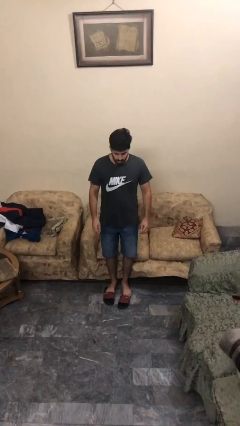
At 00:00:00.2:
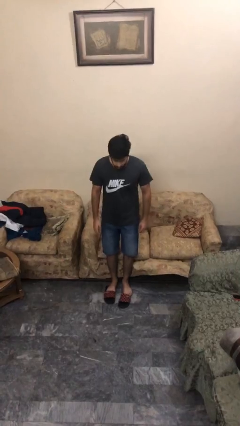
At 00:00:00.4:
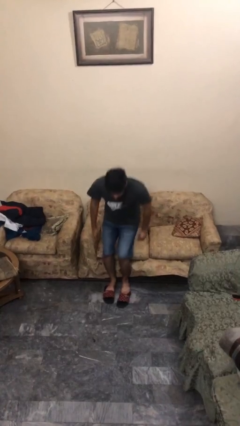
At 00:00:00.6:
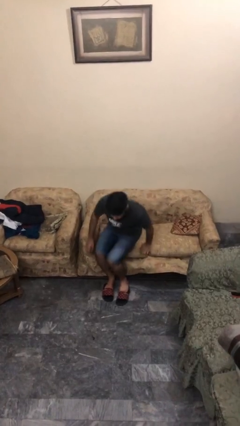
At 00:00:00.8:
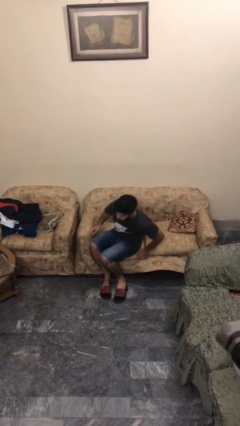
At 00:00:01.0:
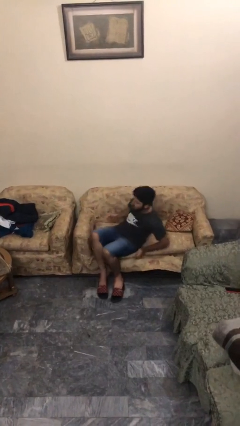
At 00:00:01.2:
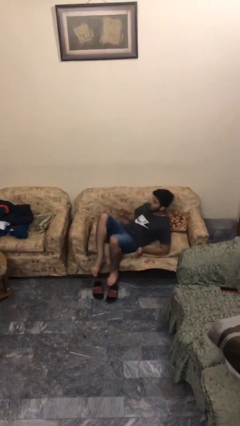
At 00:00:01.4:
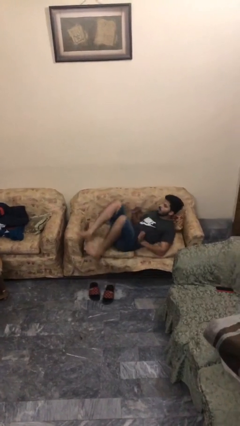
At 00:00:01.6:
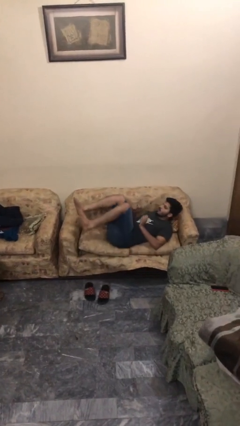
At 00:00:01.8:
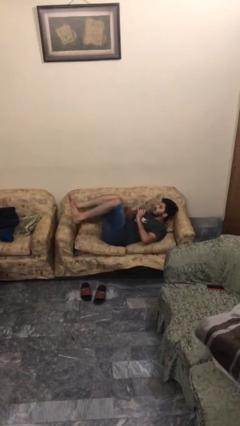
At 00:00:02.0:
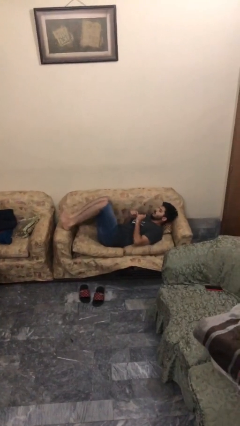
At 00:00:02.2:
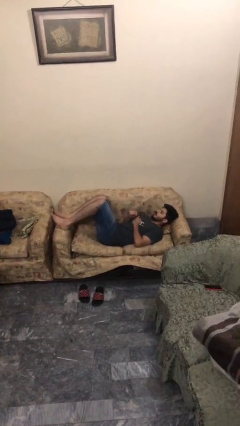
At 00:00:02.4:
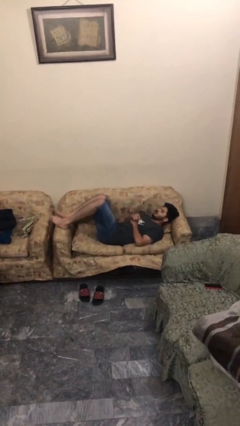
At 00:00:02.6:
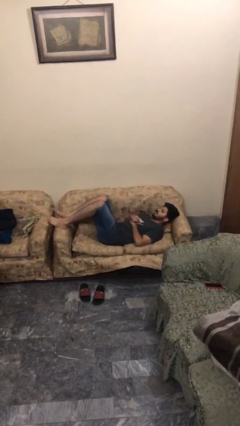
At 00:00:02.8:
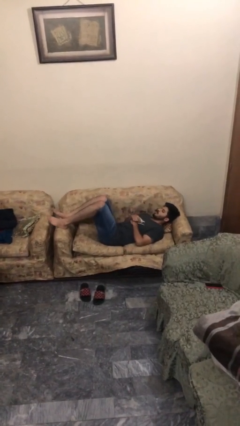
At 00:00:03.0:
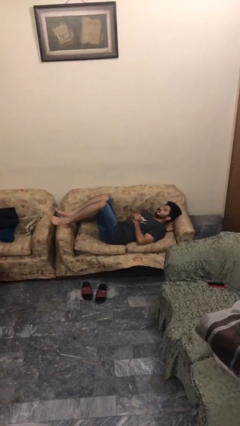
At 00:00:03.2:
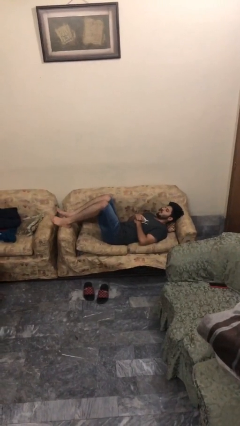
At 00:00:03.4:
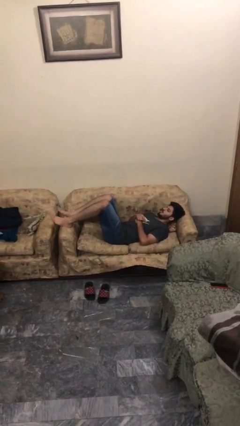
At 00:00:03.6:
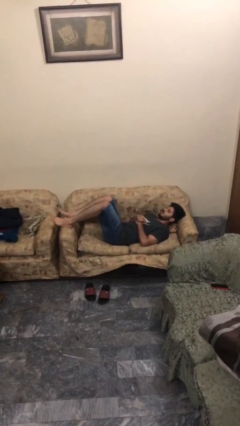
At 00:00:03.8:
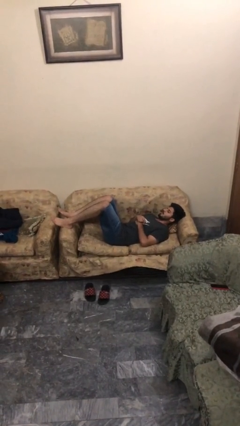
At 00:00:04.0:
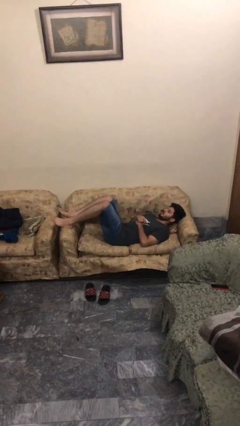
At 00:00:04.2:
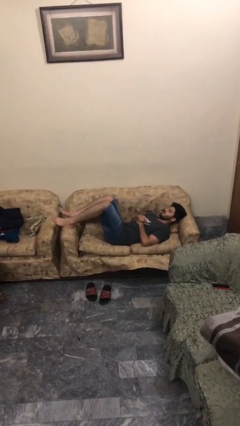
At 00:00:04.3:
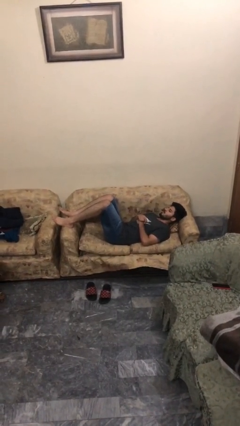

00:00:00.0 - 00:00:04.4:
person lies down on couch

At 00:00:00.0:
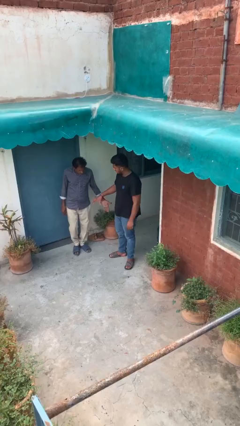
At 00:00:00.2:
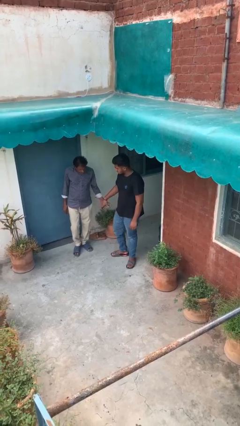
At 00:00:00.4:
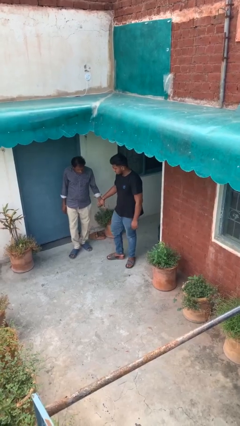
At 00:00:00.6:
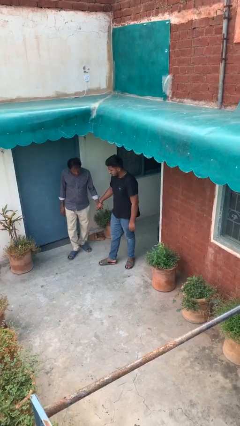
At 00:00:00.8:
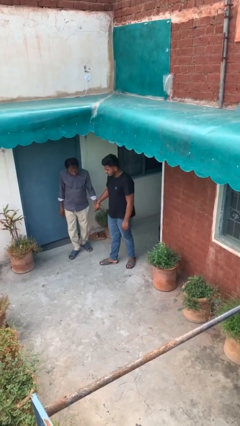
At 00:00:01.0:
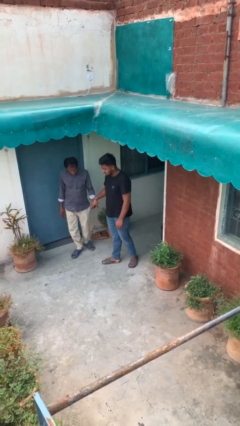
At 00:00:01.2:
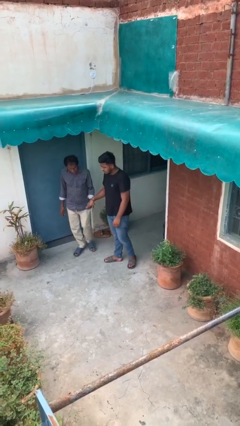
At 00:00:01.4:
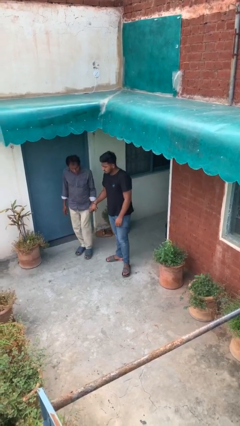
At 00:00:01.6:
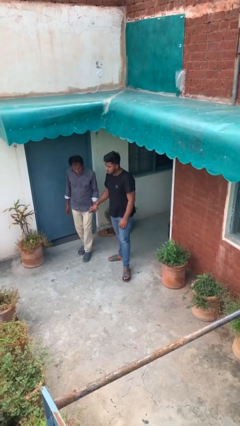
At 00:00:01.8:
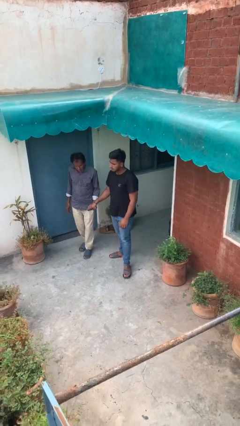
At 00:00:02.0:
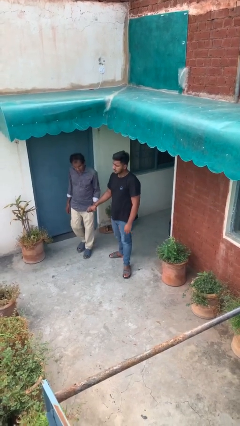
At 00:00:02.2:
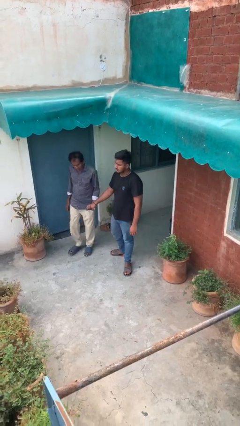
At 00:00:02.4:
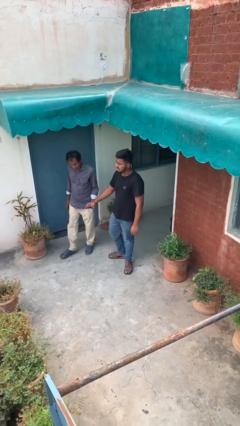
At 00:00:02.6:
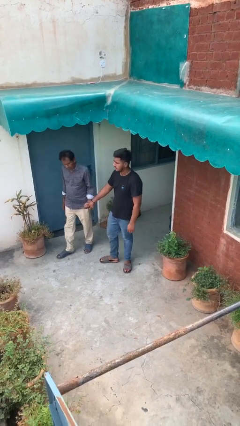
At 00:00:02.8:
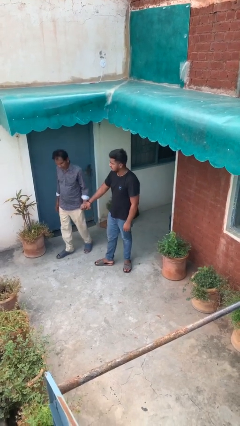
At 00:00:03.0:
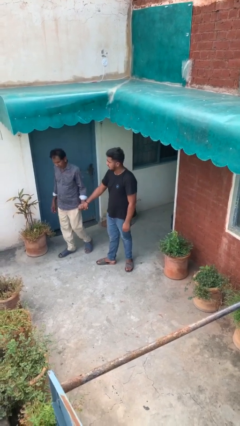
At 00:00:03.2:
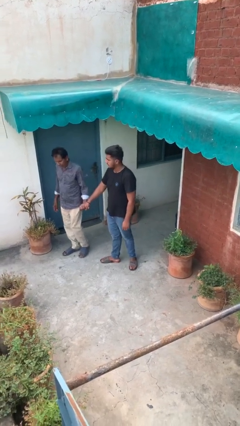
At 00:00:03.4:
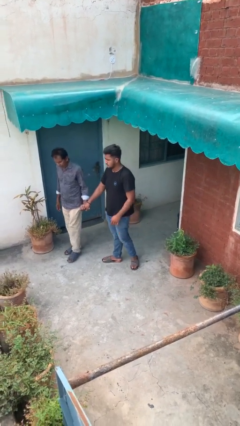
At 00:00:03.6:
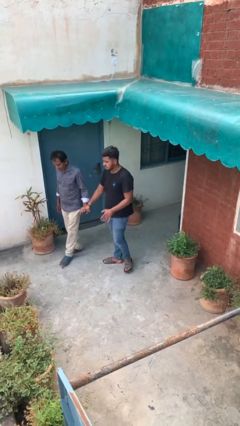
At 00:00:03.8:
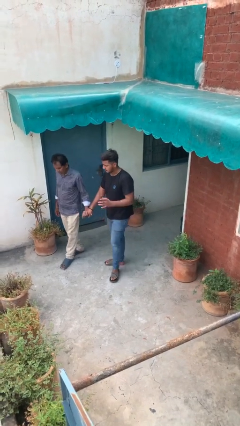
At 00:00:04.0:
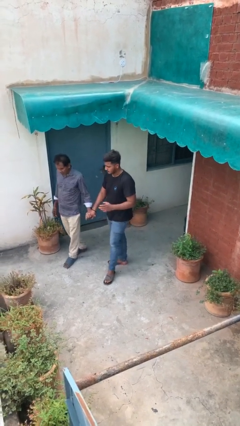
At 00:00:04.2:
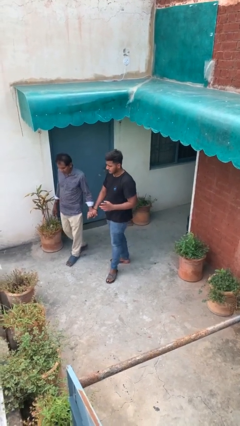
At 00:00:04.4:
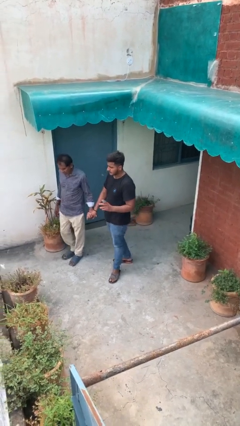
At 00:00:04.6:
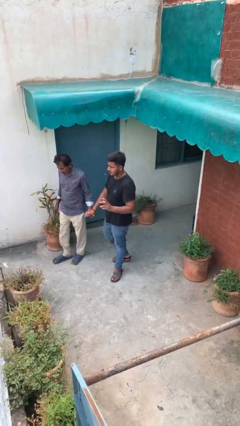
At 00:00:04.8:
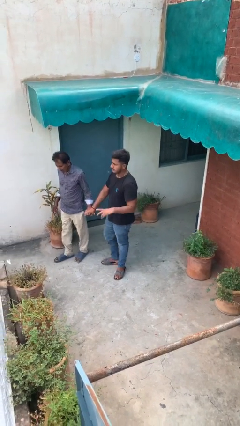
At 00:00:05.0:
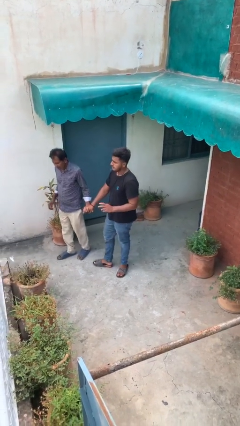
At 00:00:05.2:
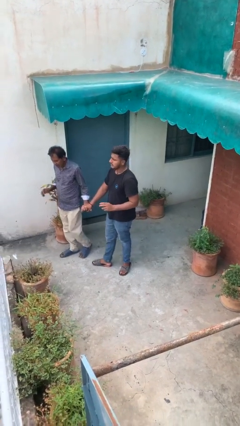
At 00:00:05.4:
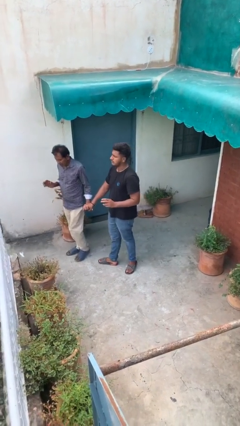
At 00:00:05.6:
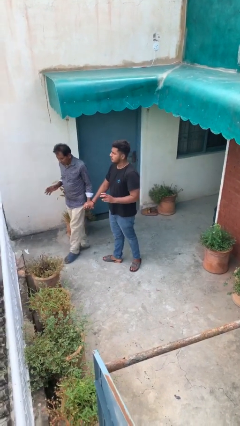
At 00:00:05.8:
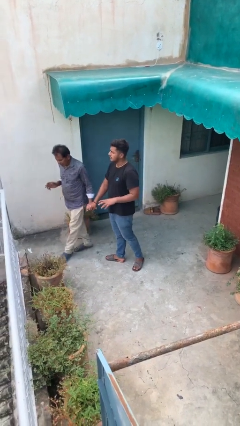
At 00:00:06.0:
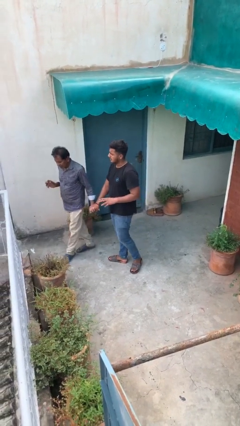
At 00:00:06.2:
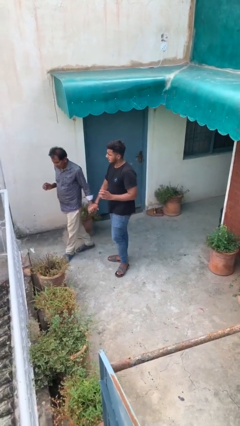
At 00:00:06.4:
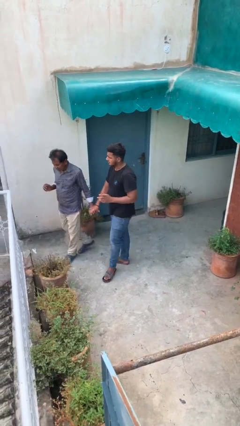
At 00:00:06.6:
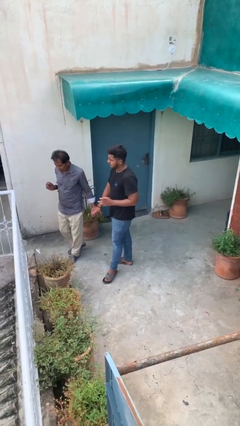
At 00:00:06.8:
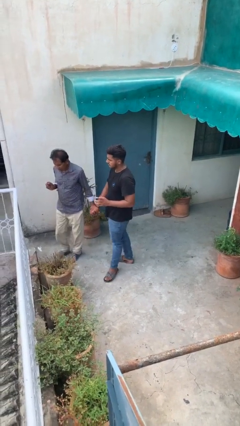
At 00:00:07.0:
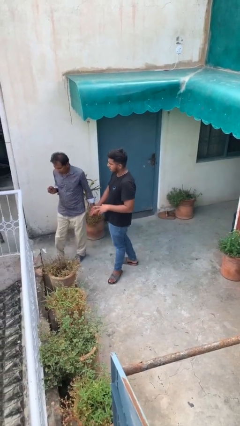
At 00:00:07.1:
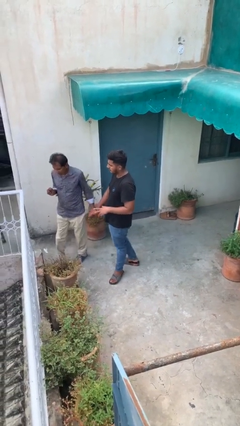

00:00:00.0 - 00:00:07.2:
person holds hand

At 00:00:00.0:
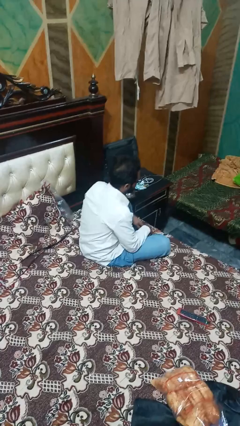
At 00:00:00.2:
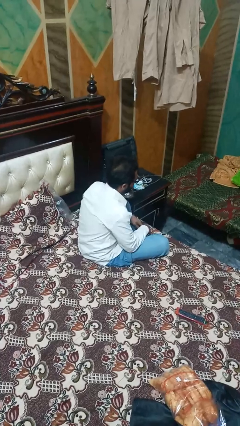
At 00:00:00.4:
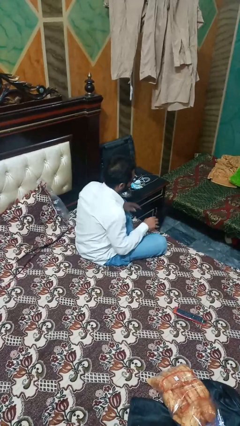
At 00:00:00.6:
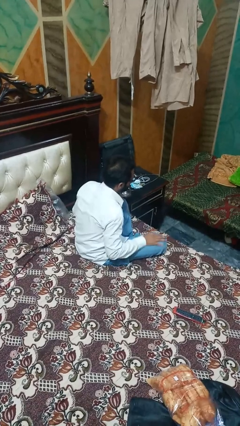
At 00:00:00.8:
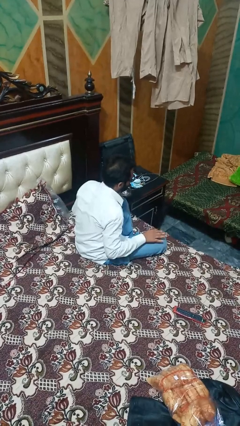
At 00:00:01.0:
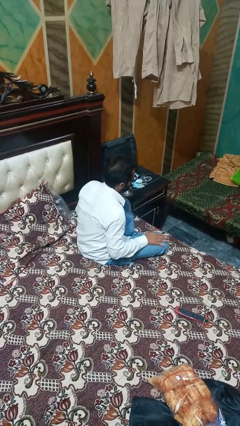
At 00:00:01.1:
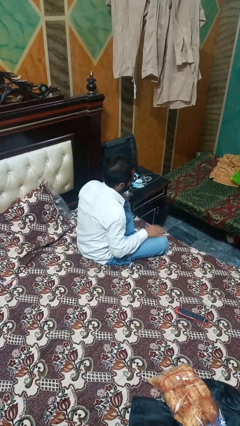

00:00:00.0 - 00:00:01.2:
person slaps hands on thighs

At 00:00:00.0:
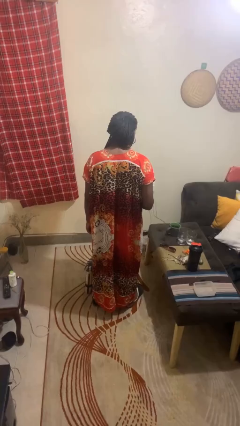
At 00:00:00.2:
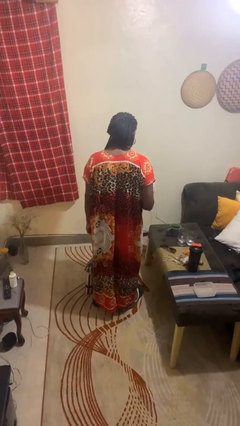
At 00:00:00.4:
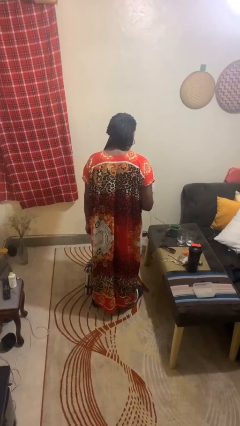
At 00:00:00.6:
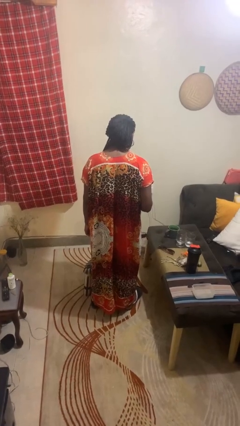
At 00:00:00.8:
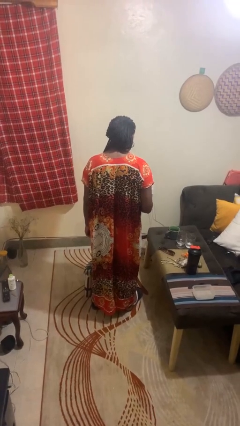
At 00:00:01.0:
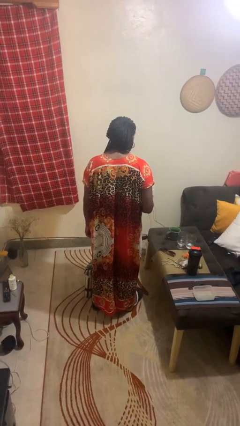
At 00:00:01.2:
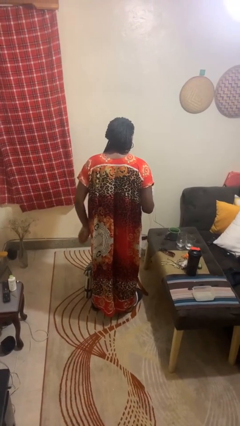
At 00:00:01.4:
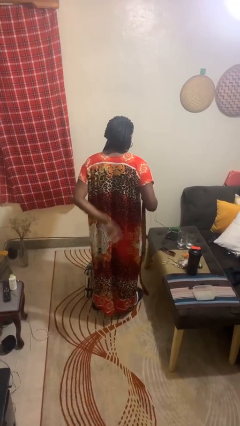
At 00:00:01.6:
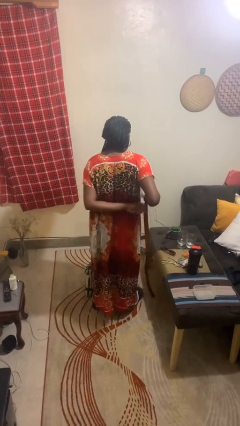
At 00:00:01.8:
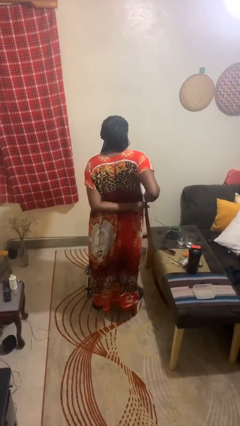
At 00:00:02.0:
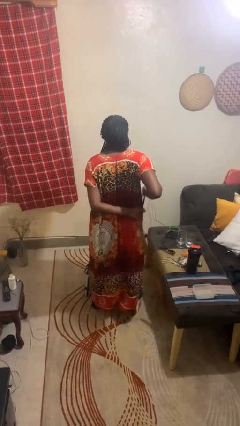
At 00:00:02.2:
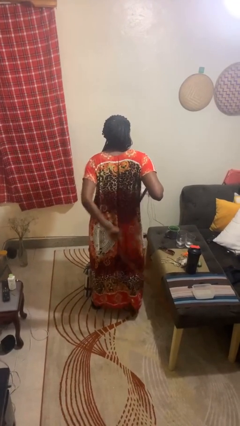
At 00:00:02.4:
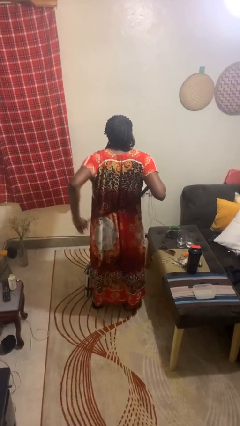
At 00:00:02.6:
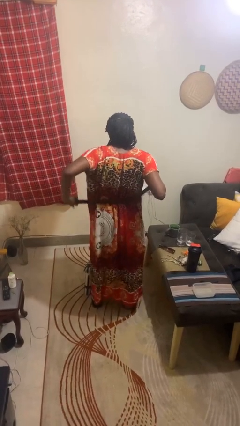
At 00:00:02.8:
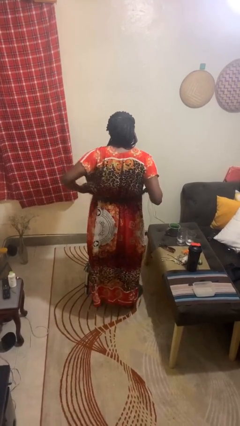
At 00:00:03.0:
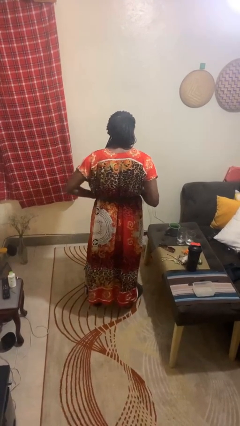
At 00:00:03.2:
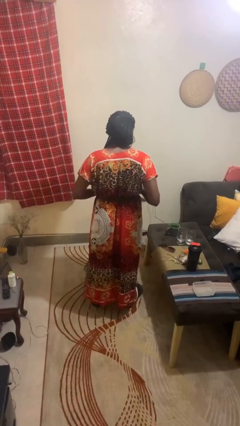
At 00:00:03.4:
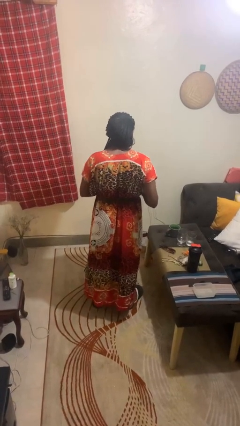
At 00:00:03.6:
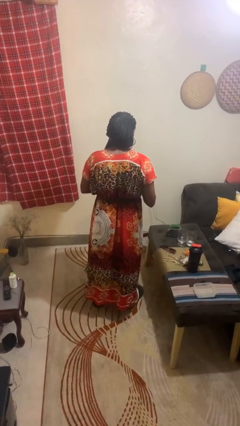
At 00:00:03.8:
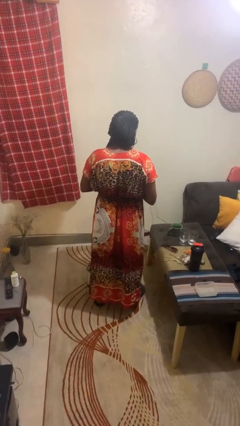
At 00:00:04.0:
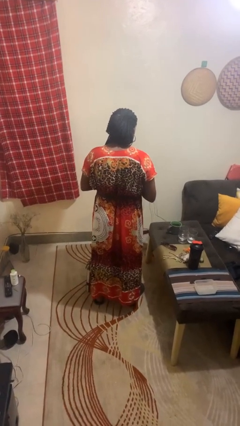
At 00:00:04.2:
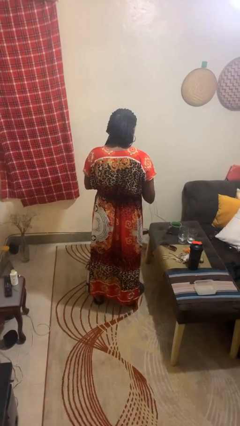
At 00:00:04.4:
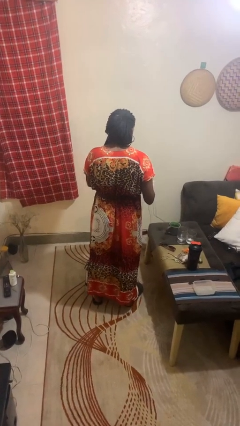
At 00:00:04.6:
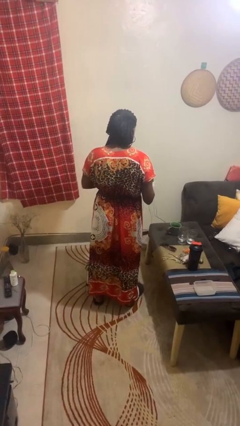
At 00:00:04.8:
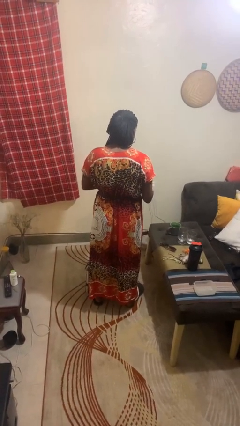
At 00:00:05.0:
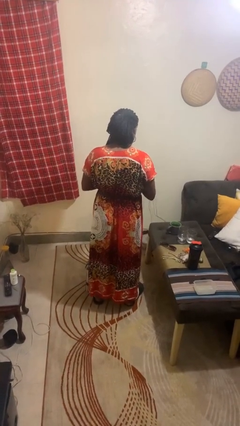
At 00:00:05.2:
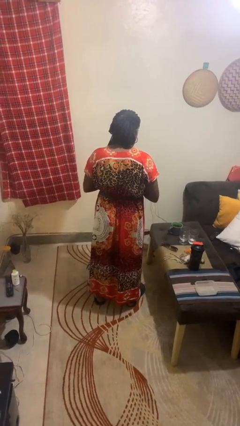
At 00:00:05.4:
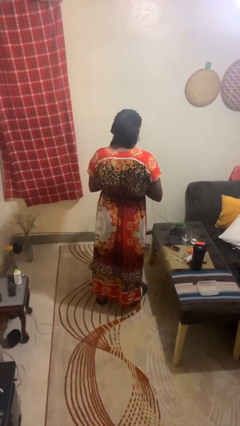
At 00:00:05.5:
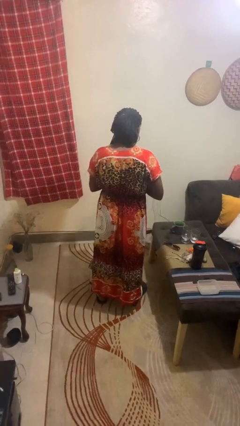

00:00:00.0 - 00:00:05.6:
person puts on belt
